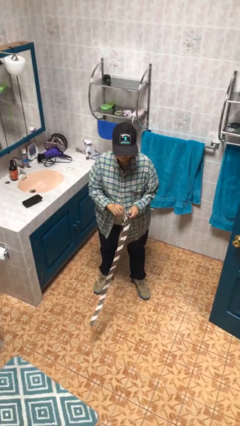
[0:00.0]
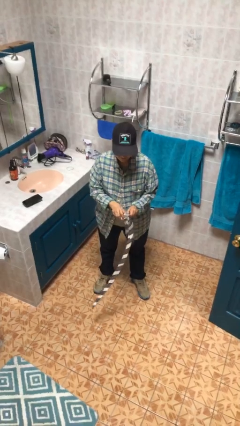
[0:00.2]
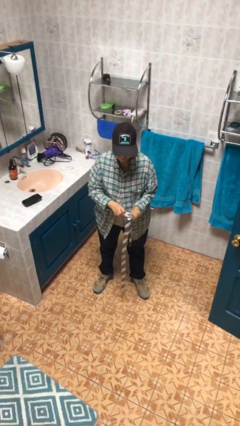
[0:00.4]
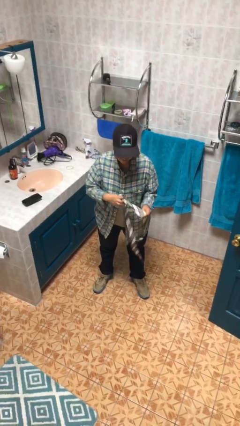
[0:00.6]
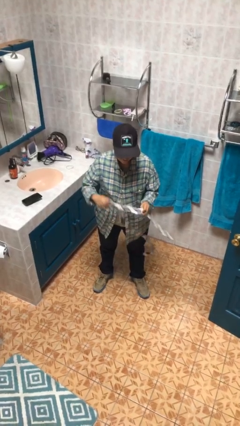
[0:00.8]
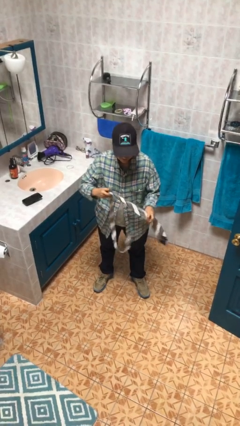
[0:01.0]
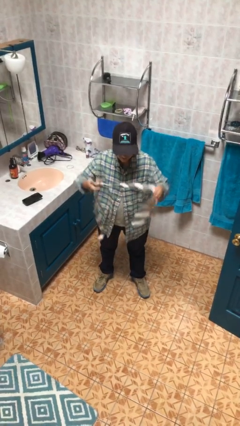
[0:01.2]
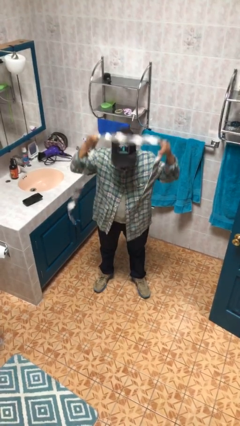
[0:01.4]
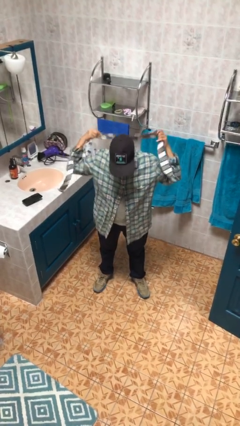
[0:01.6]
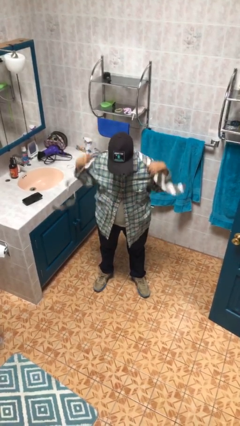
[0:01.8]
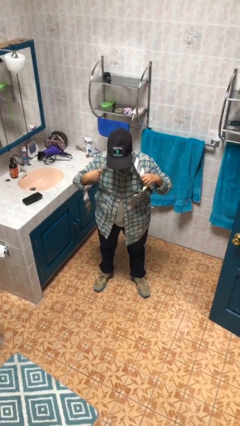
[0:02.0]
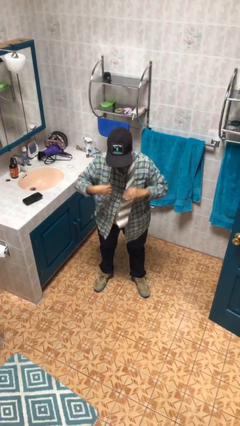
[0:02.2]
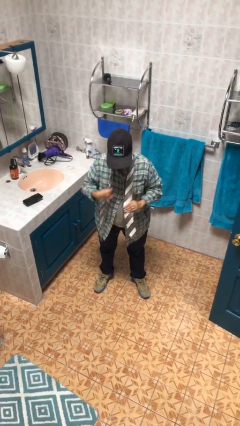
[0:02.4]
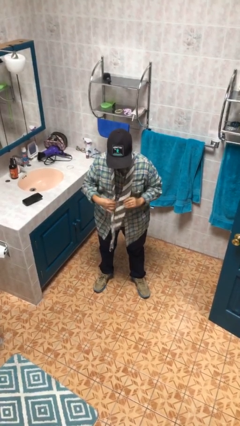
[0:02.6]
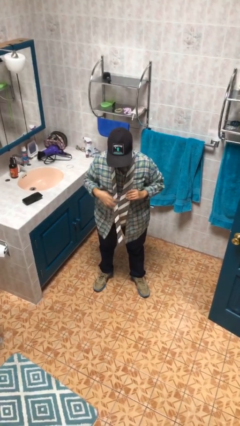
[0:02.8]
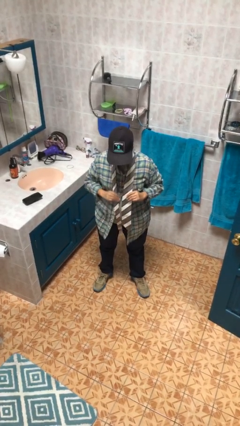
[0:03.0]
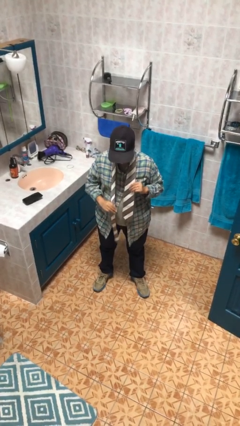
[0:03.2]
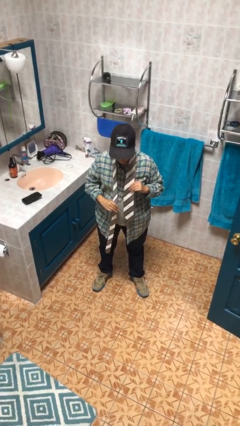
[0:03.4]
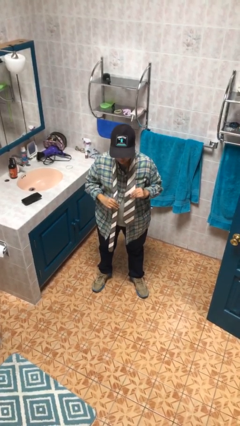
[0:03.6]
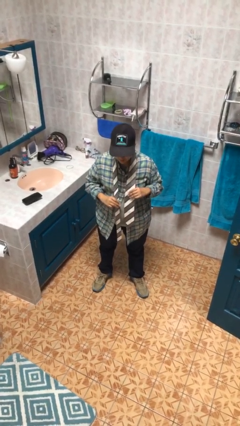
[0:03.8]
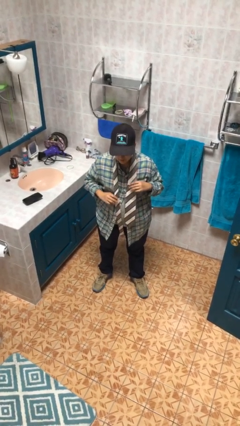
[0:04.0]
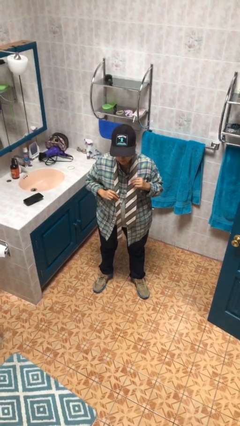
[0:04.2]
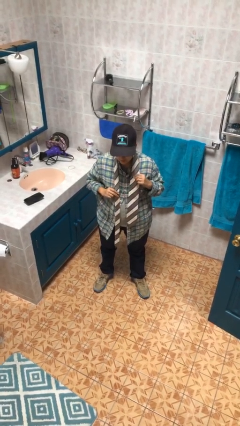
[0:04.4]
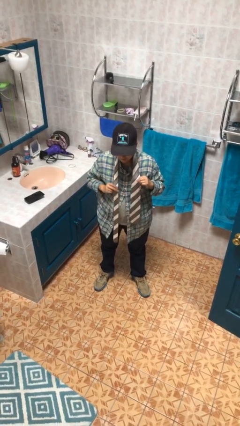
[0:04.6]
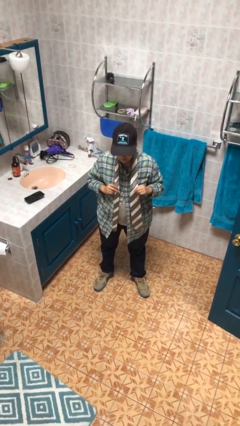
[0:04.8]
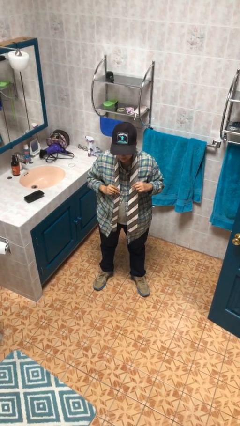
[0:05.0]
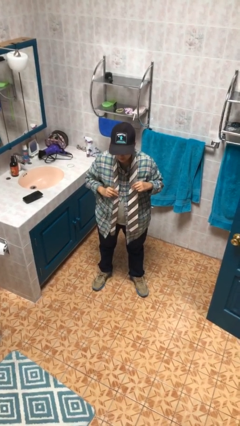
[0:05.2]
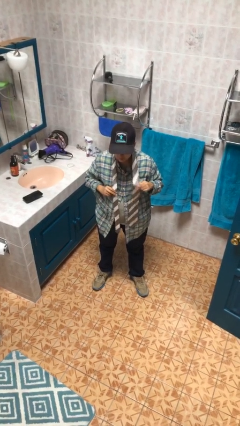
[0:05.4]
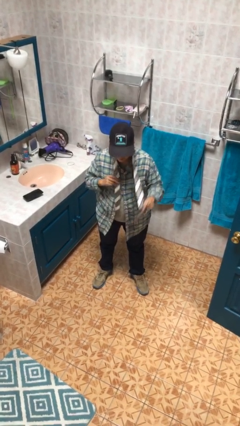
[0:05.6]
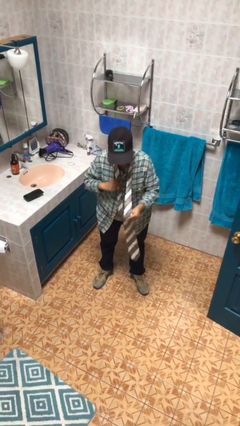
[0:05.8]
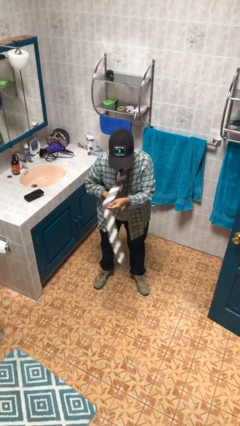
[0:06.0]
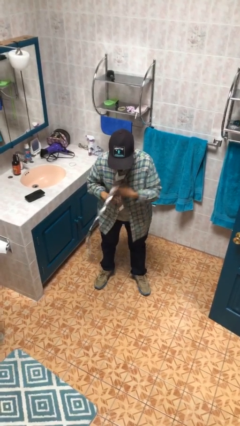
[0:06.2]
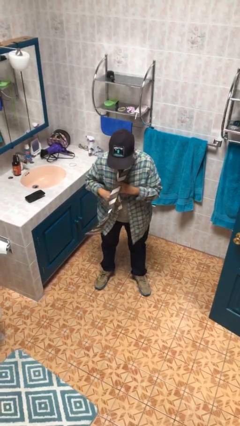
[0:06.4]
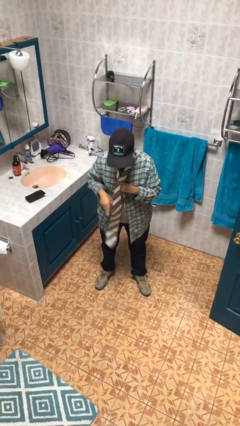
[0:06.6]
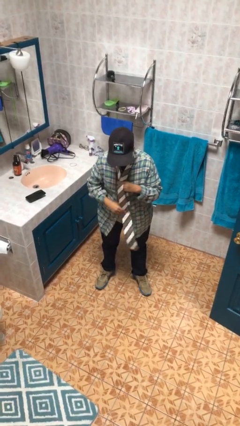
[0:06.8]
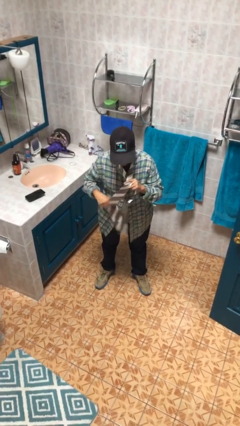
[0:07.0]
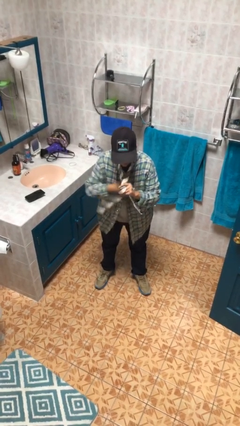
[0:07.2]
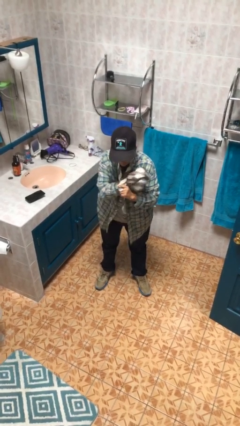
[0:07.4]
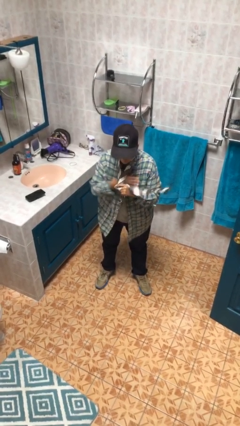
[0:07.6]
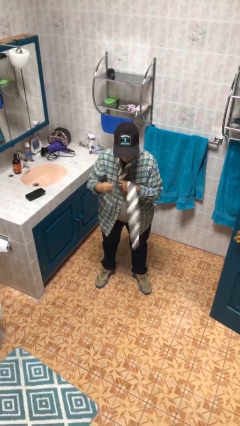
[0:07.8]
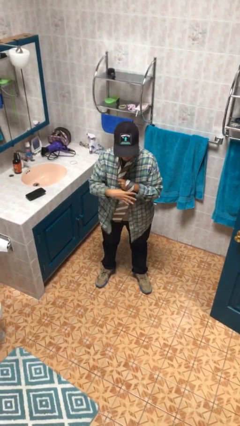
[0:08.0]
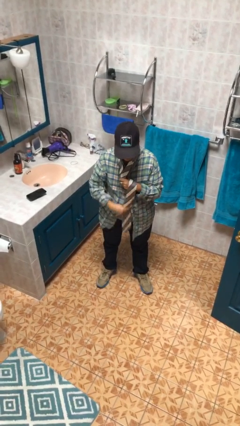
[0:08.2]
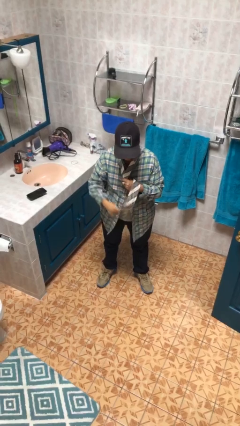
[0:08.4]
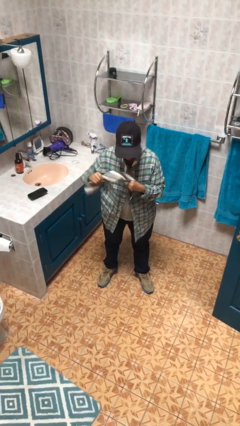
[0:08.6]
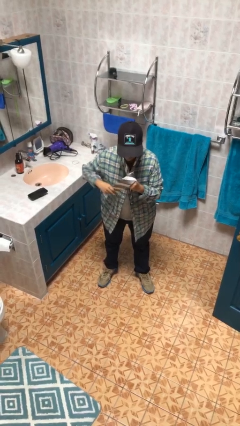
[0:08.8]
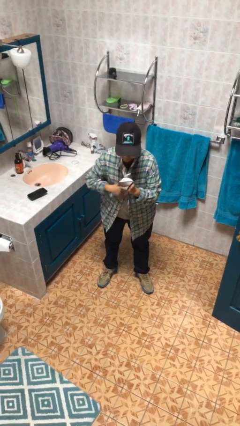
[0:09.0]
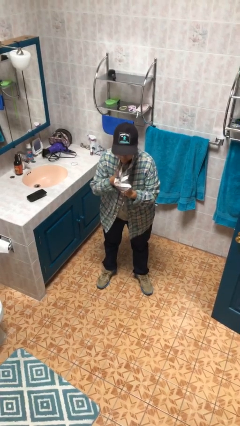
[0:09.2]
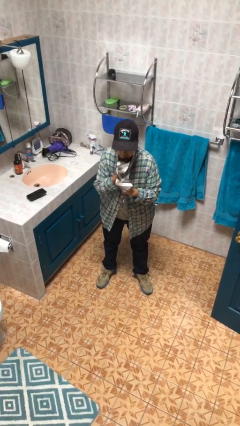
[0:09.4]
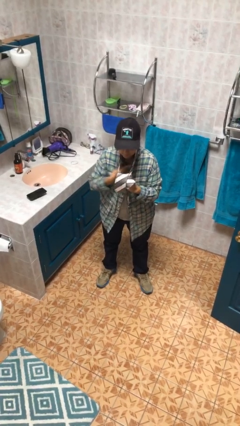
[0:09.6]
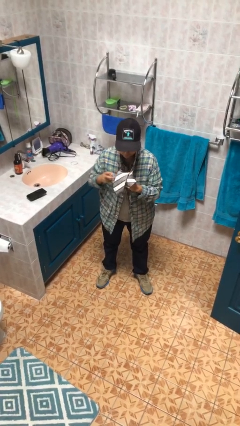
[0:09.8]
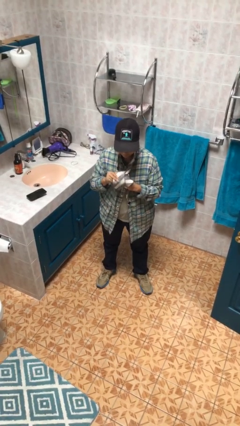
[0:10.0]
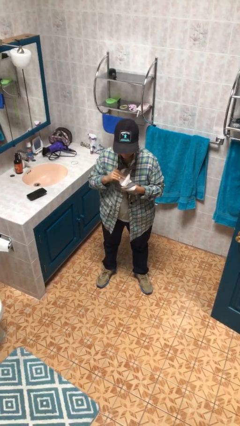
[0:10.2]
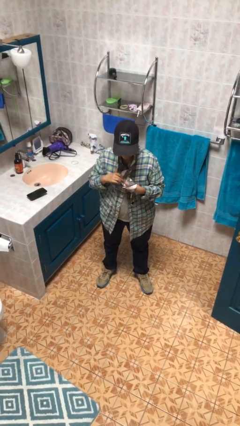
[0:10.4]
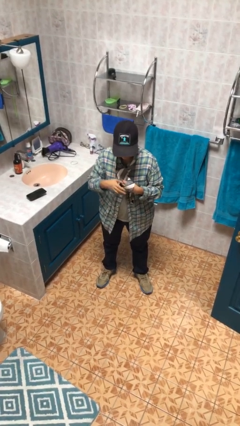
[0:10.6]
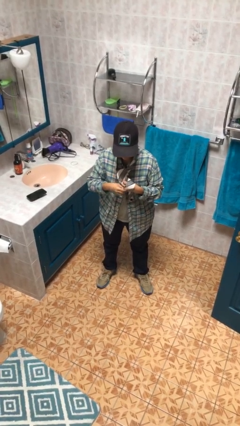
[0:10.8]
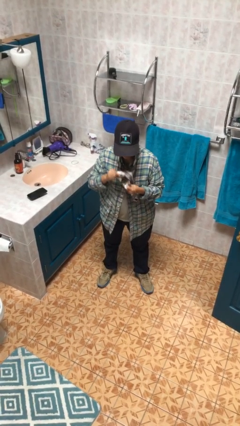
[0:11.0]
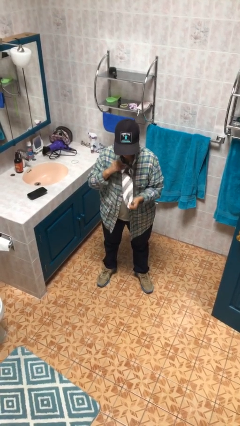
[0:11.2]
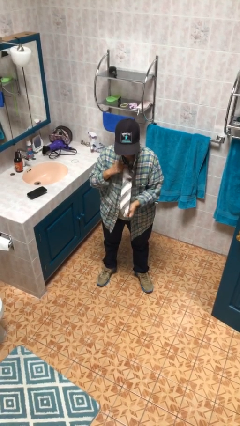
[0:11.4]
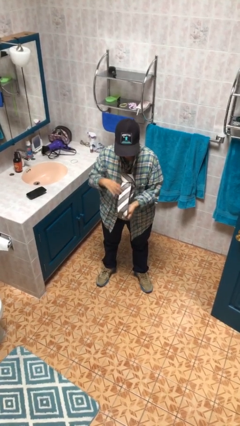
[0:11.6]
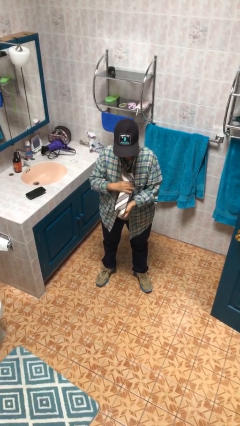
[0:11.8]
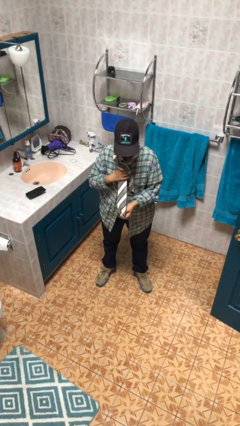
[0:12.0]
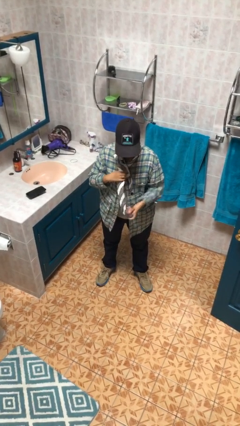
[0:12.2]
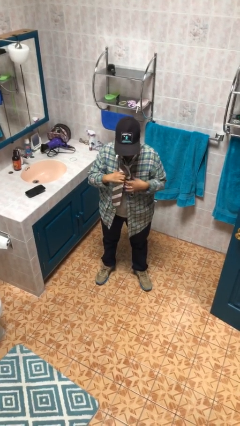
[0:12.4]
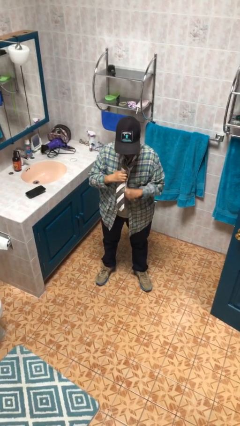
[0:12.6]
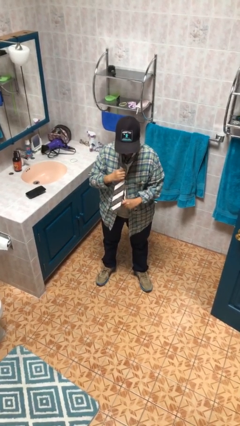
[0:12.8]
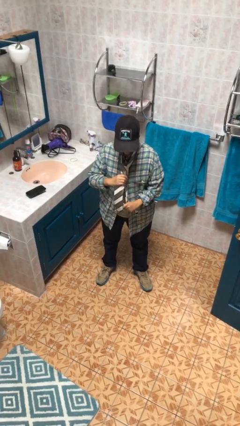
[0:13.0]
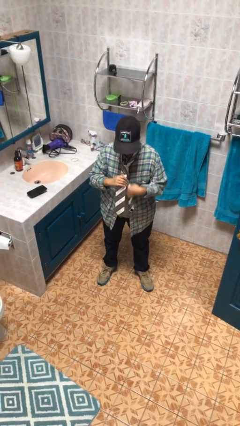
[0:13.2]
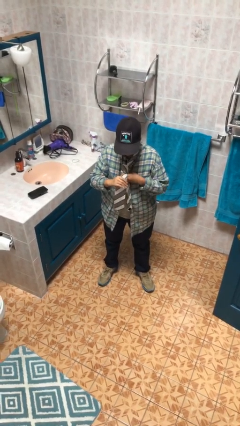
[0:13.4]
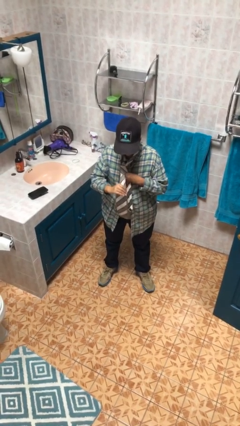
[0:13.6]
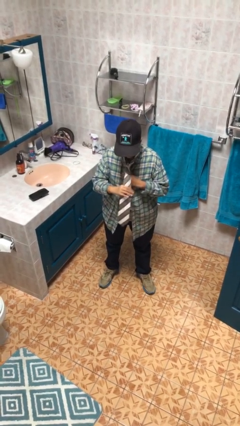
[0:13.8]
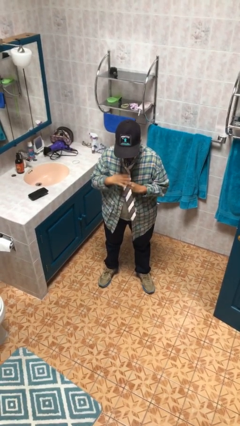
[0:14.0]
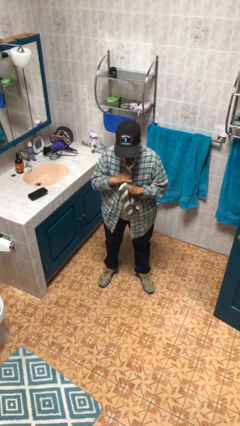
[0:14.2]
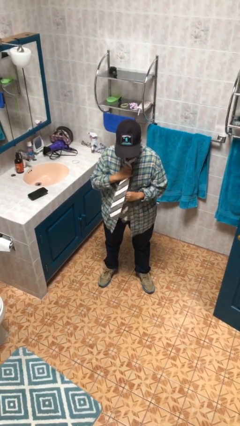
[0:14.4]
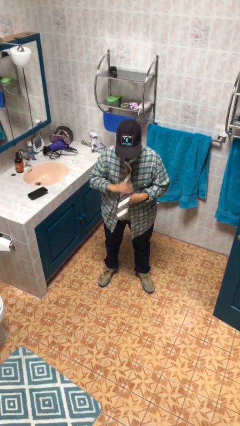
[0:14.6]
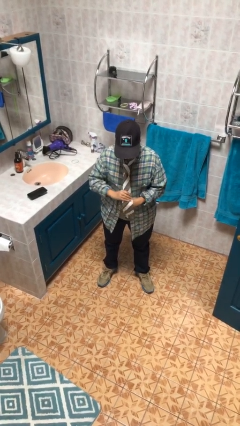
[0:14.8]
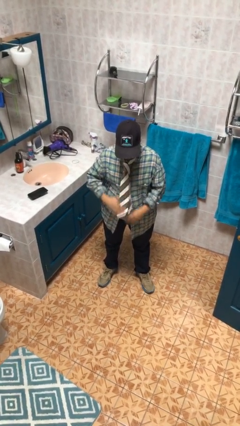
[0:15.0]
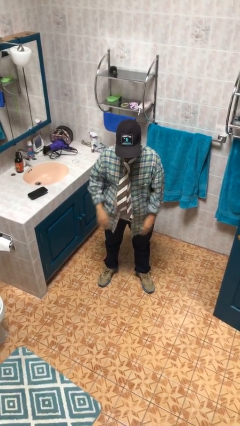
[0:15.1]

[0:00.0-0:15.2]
person puts on necktie

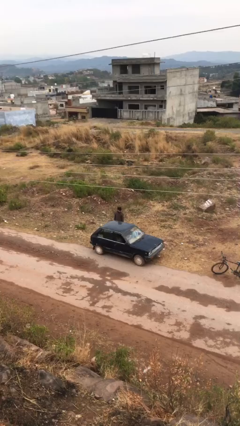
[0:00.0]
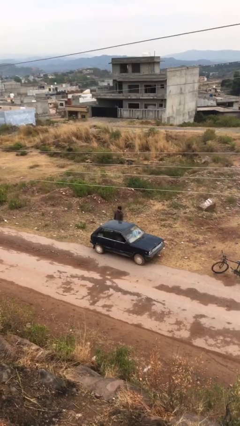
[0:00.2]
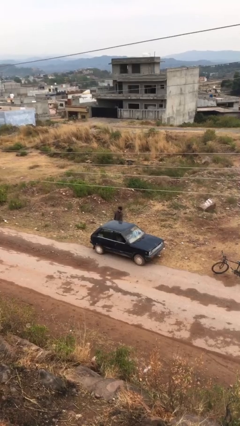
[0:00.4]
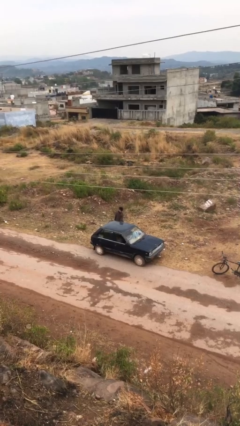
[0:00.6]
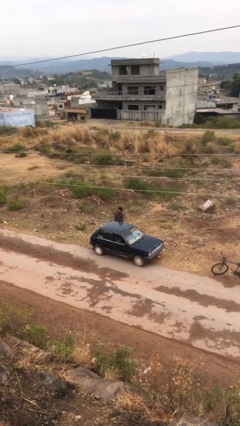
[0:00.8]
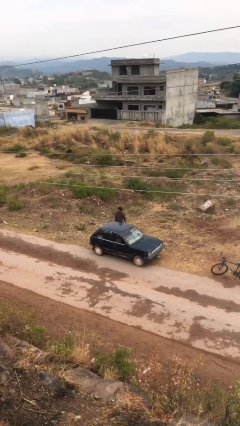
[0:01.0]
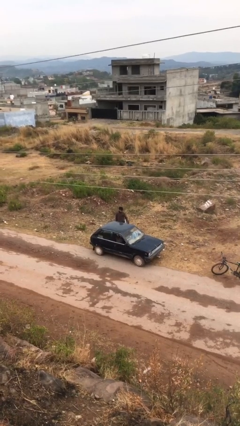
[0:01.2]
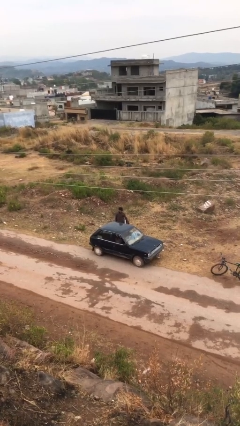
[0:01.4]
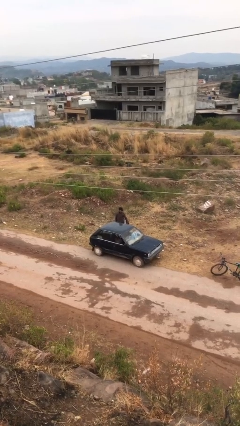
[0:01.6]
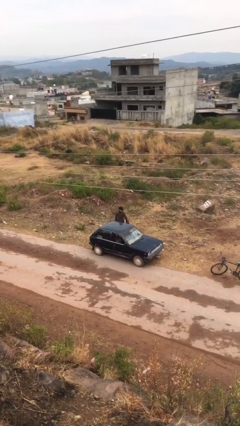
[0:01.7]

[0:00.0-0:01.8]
person opens car door

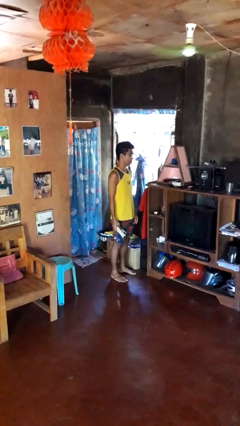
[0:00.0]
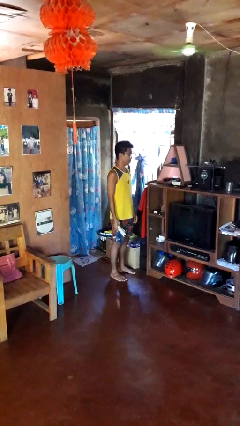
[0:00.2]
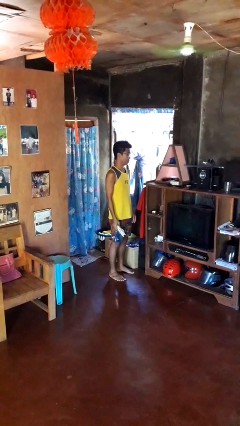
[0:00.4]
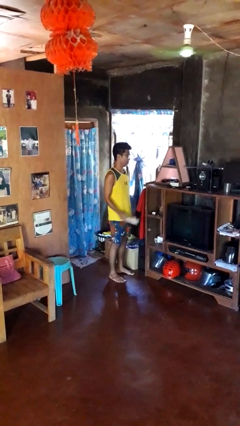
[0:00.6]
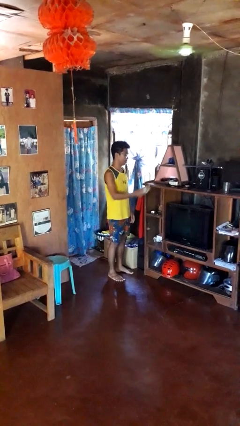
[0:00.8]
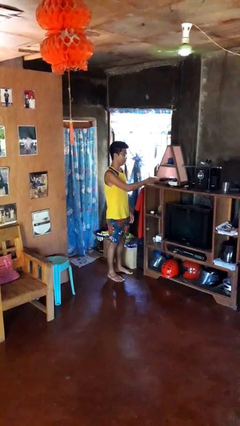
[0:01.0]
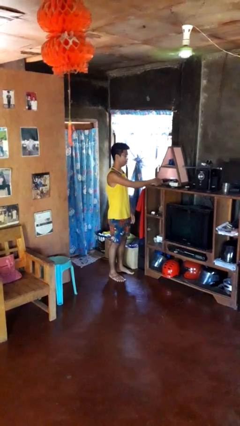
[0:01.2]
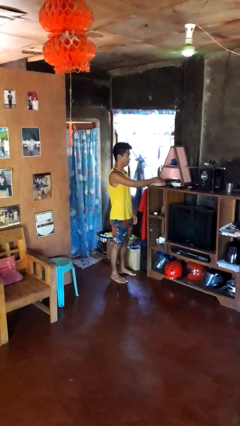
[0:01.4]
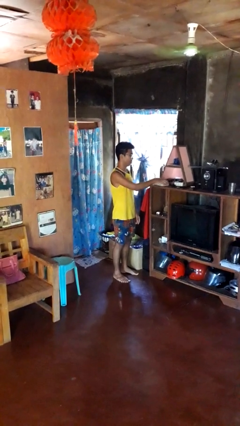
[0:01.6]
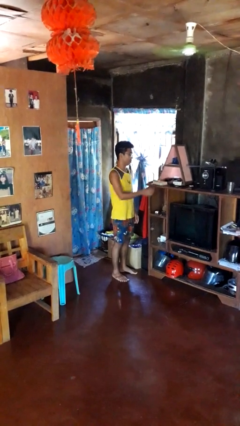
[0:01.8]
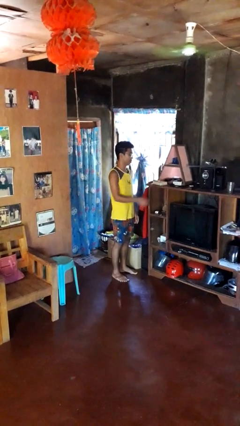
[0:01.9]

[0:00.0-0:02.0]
person puts down object on shelf
